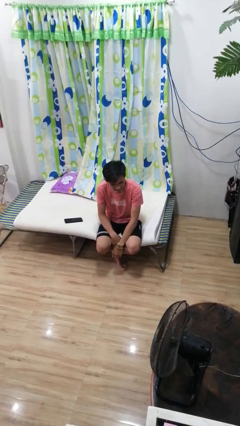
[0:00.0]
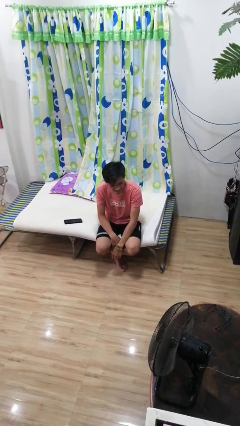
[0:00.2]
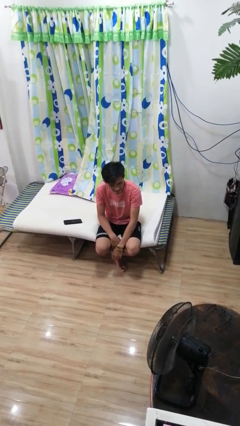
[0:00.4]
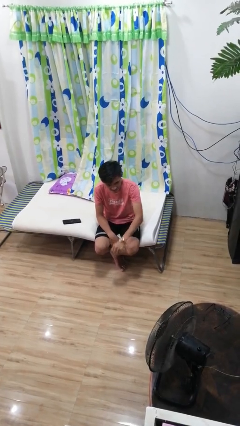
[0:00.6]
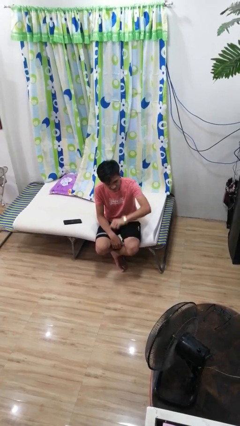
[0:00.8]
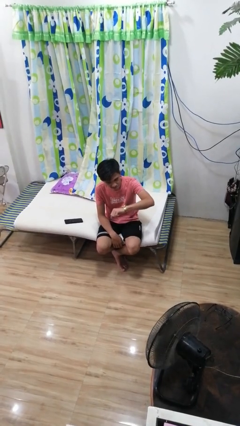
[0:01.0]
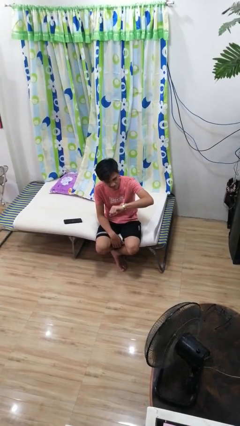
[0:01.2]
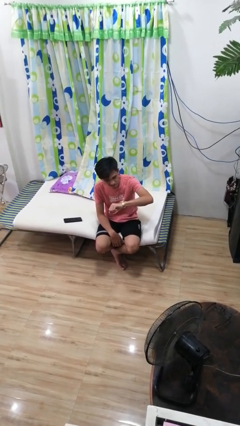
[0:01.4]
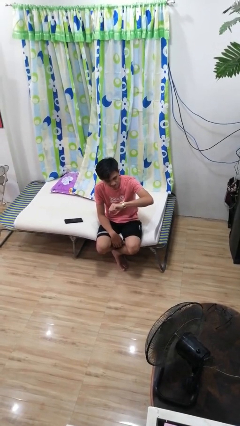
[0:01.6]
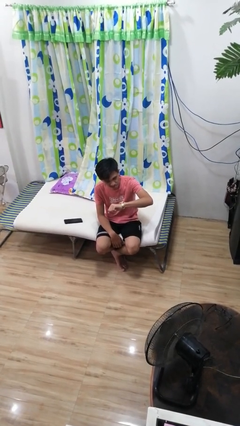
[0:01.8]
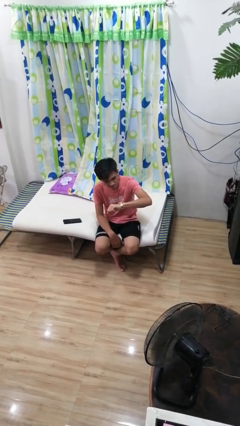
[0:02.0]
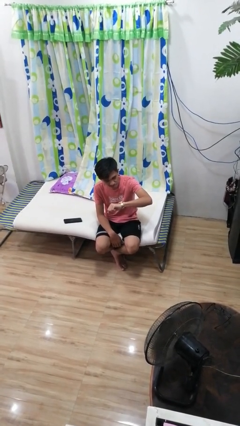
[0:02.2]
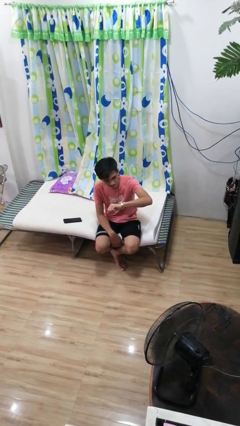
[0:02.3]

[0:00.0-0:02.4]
person looks at wristwatch

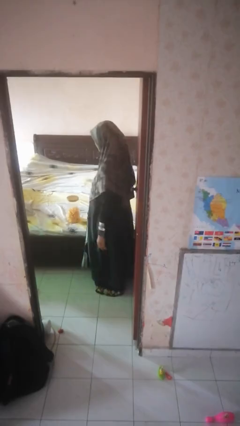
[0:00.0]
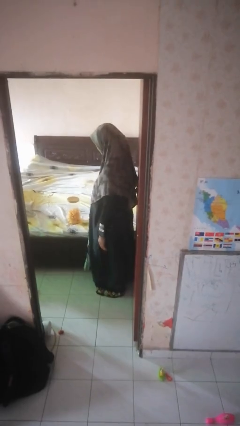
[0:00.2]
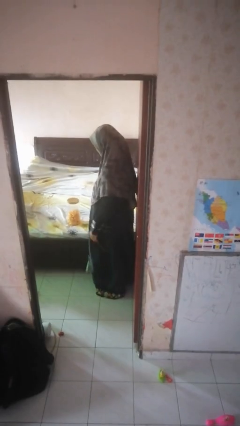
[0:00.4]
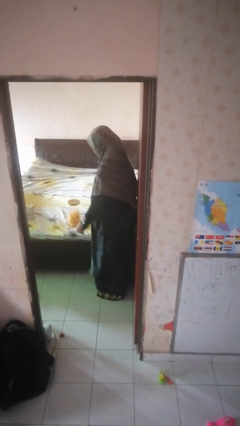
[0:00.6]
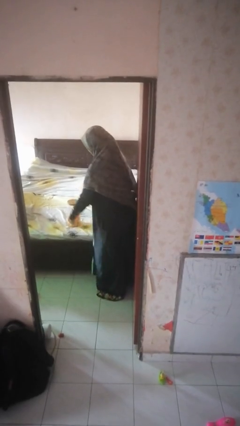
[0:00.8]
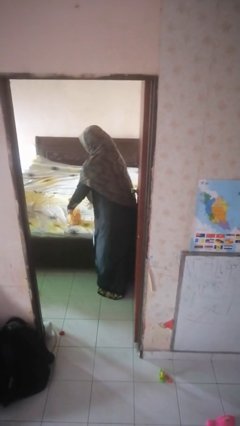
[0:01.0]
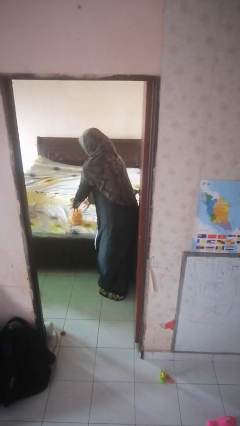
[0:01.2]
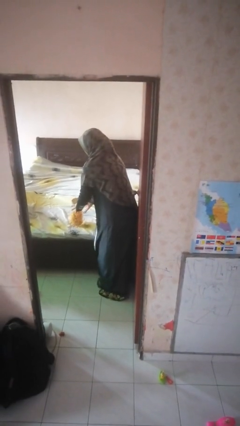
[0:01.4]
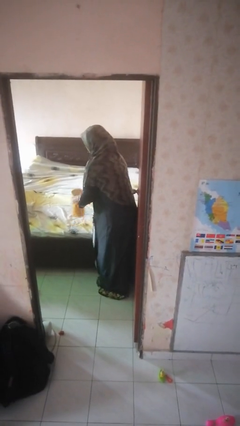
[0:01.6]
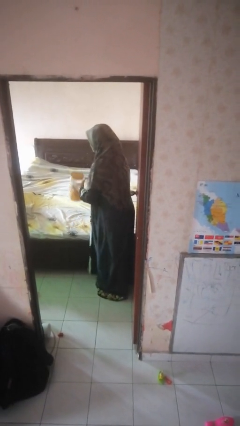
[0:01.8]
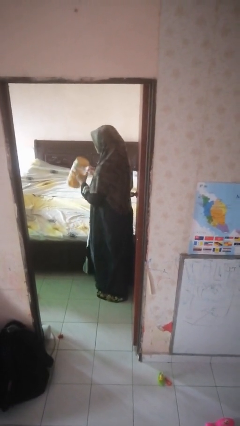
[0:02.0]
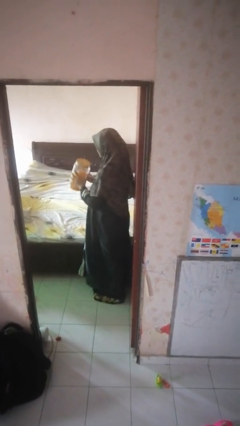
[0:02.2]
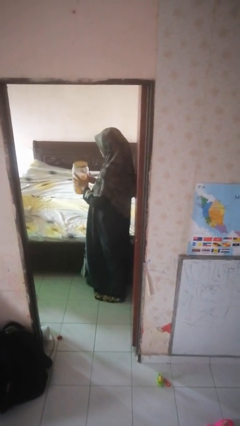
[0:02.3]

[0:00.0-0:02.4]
person picks up object from bed

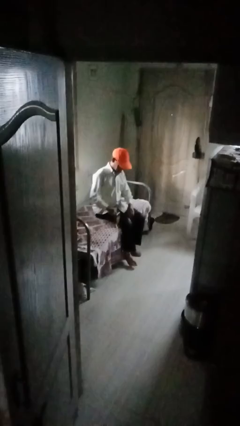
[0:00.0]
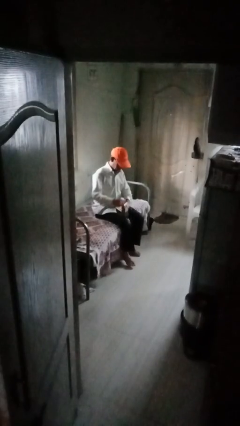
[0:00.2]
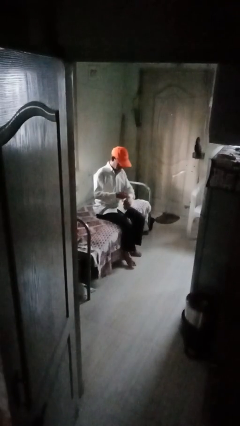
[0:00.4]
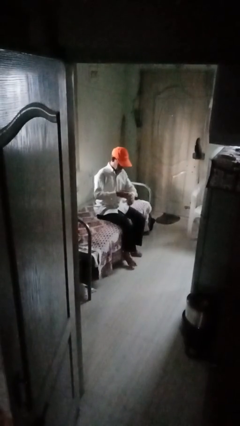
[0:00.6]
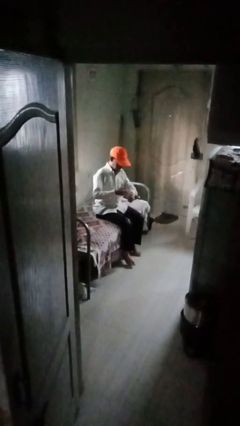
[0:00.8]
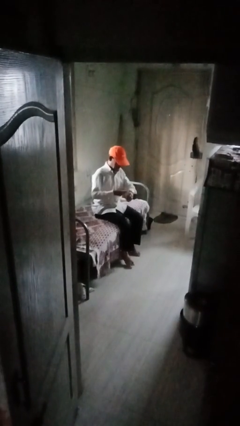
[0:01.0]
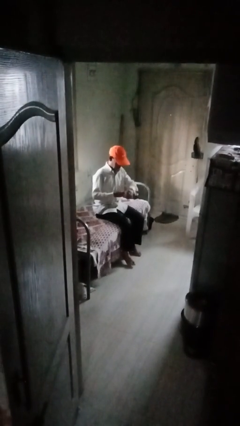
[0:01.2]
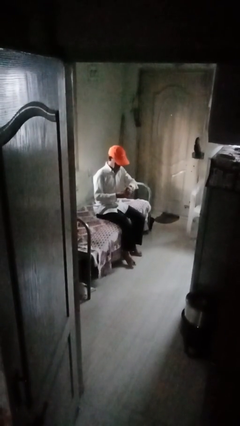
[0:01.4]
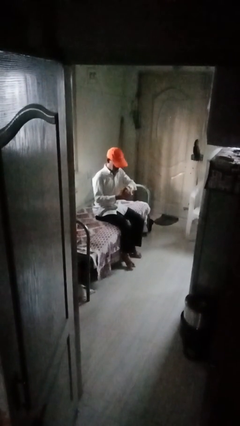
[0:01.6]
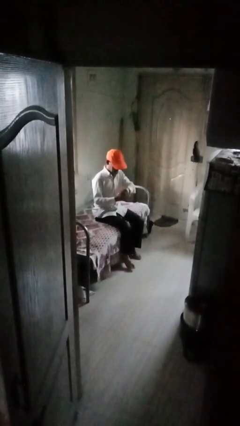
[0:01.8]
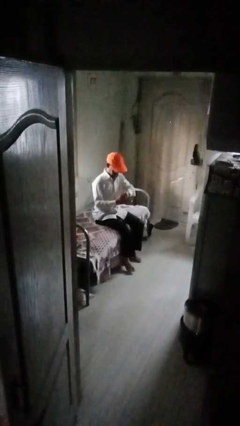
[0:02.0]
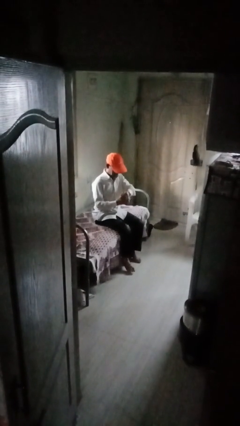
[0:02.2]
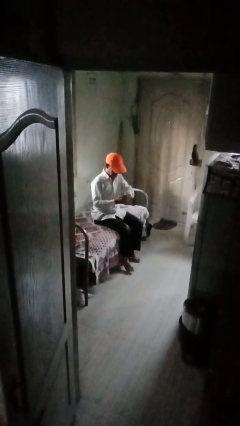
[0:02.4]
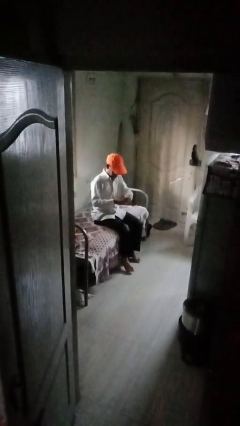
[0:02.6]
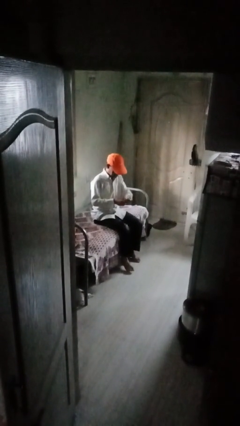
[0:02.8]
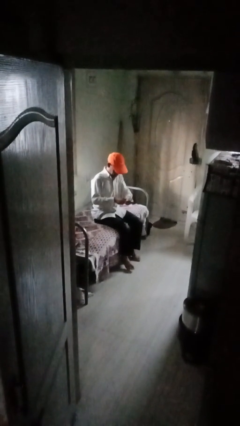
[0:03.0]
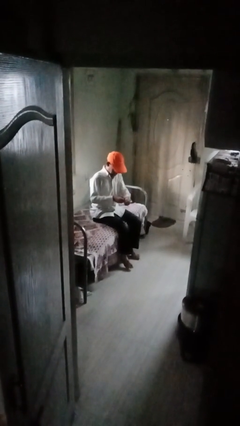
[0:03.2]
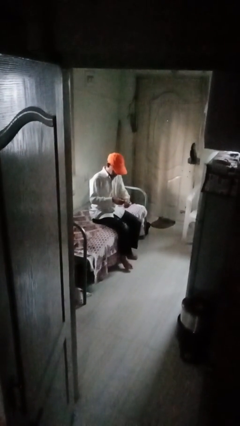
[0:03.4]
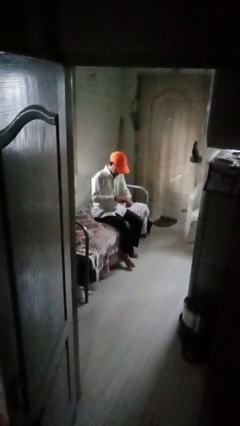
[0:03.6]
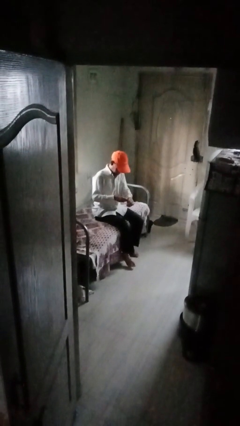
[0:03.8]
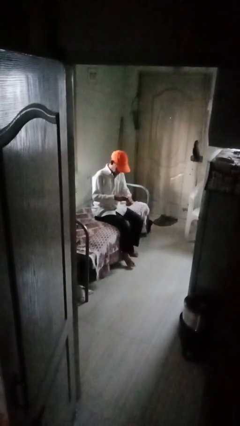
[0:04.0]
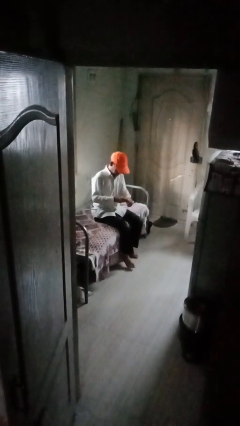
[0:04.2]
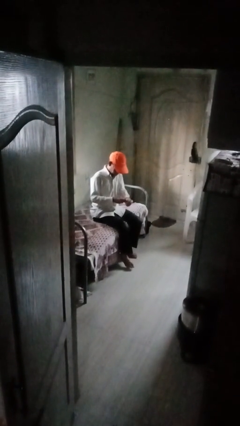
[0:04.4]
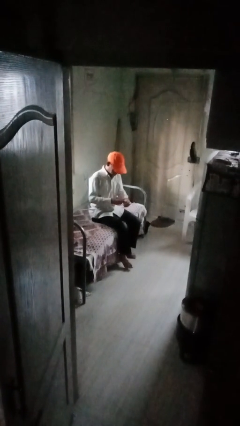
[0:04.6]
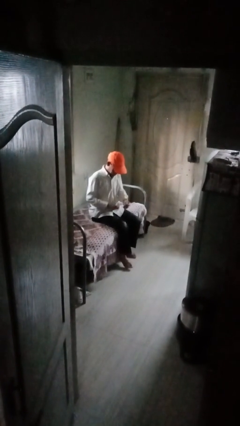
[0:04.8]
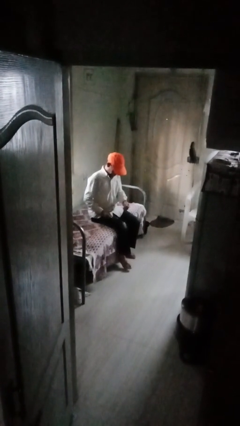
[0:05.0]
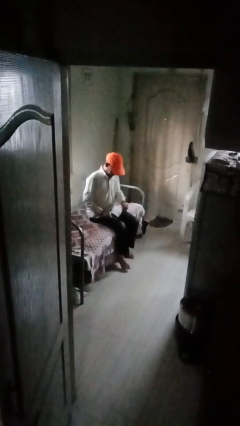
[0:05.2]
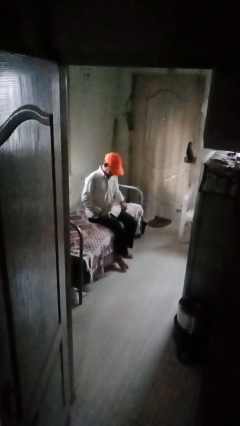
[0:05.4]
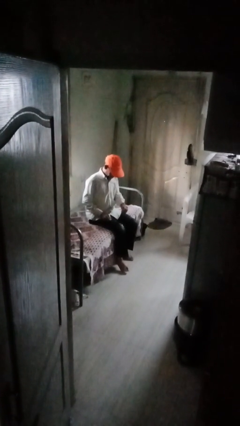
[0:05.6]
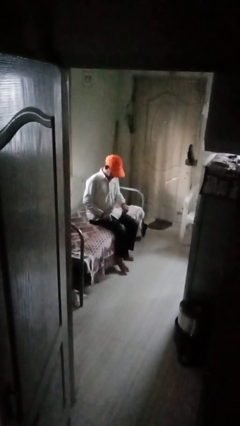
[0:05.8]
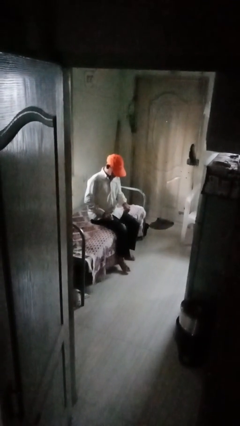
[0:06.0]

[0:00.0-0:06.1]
person puts on wristwatch

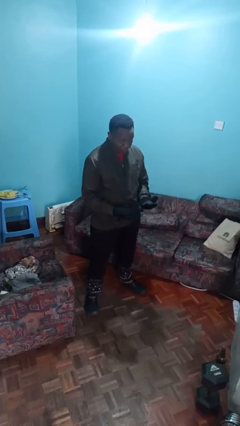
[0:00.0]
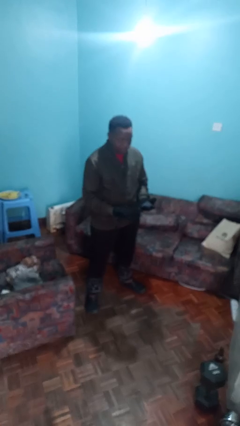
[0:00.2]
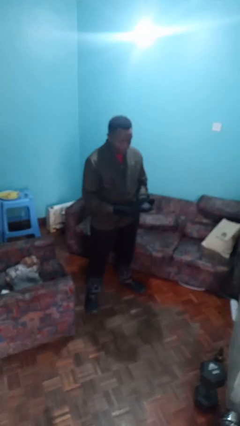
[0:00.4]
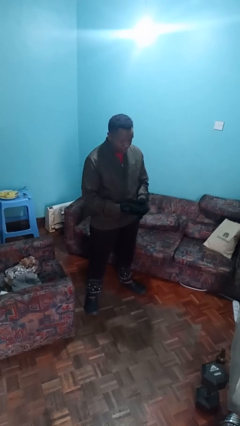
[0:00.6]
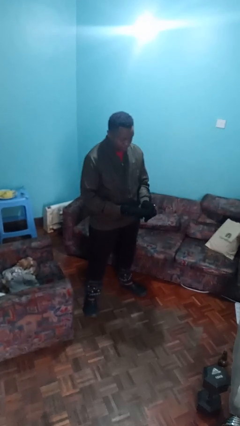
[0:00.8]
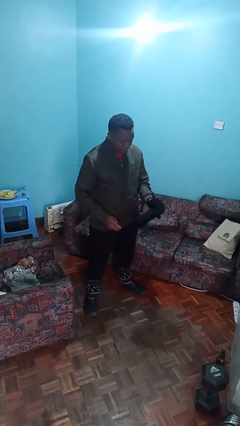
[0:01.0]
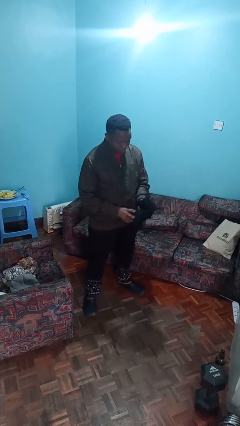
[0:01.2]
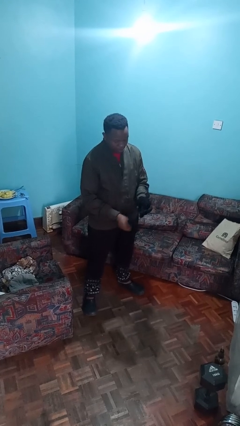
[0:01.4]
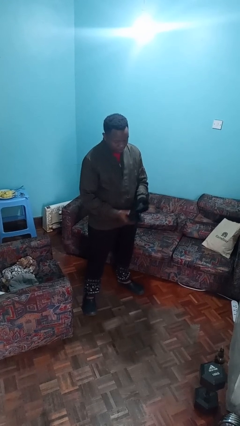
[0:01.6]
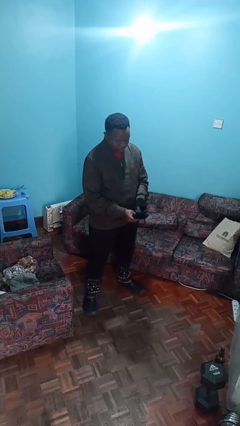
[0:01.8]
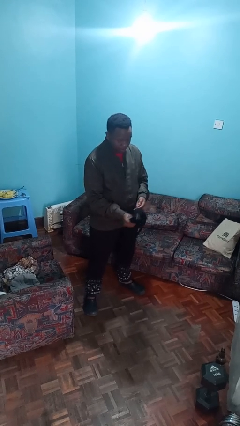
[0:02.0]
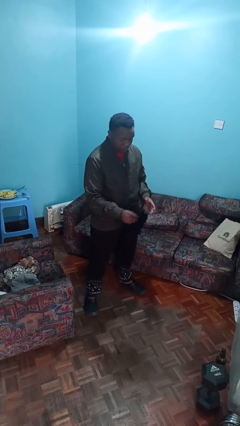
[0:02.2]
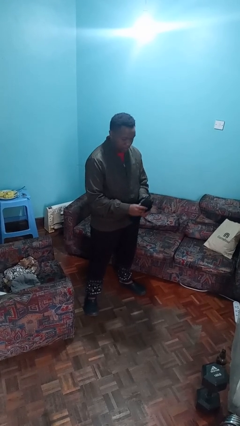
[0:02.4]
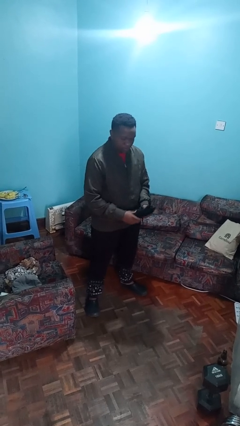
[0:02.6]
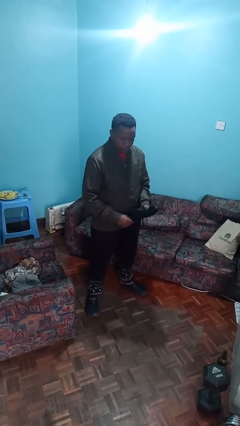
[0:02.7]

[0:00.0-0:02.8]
person takes off gloves

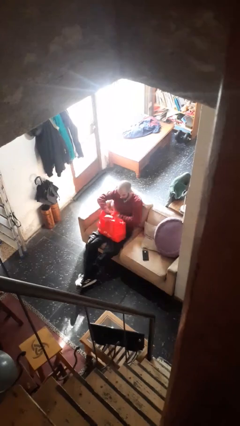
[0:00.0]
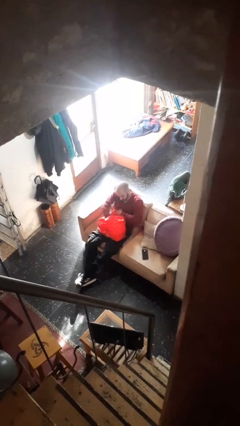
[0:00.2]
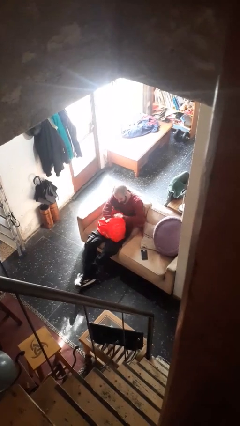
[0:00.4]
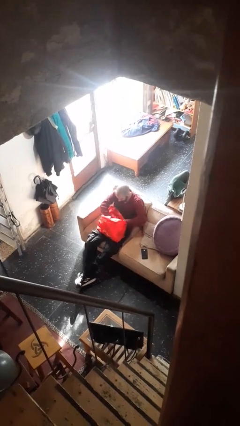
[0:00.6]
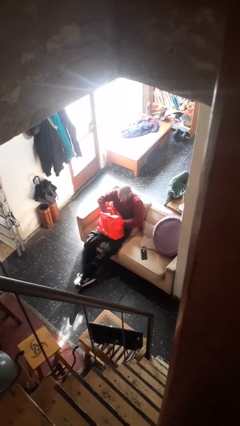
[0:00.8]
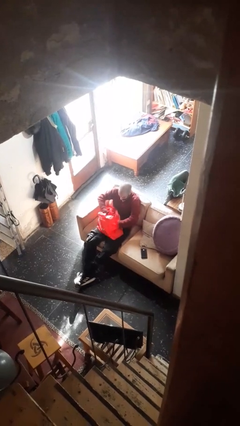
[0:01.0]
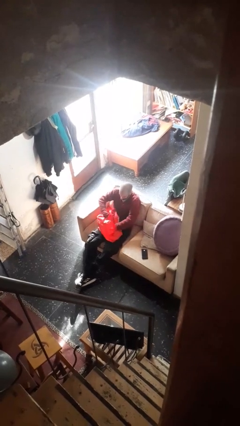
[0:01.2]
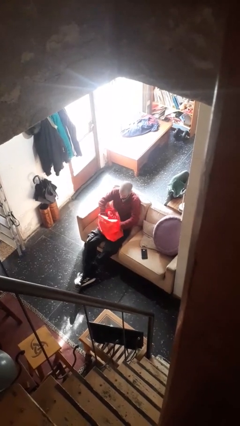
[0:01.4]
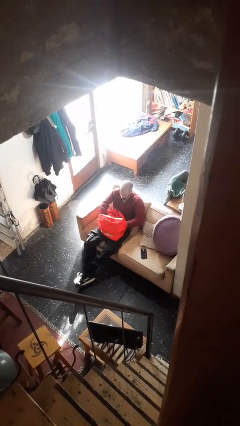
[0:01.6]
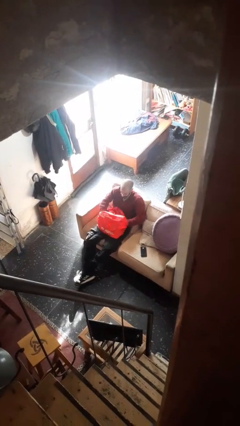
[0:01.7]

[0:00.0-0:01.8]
person searches in bag

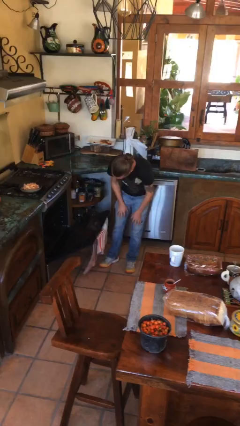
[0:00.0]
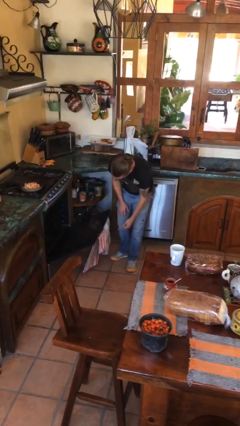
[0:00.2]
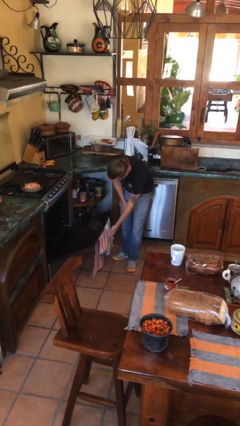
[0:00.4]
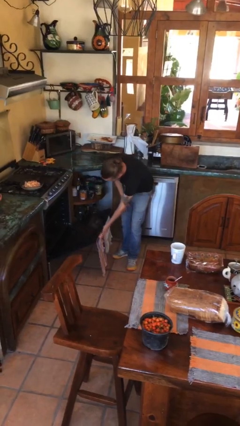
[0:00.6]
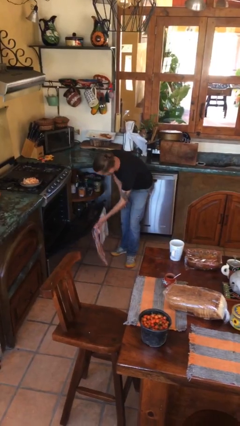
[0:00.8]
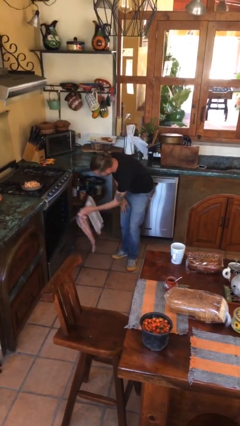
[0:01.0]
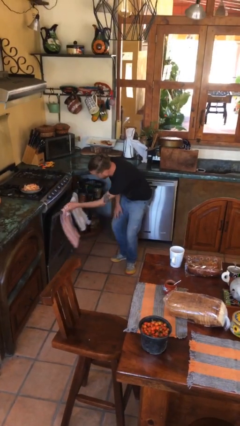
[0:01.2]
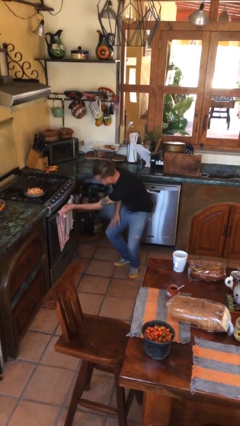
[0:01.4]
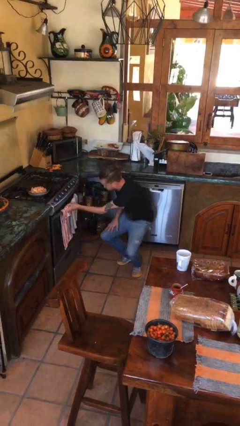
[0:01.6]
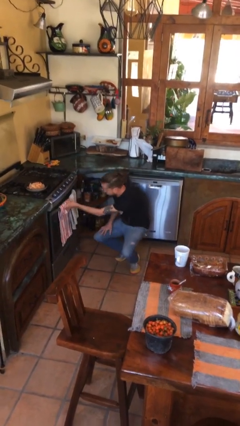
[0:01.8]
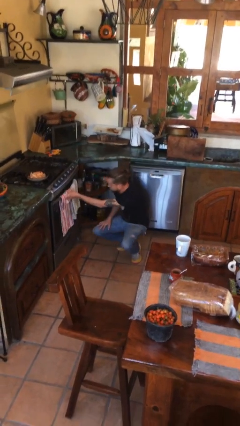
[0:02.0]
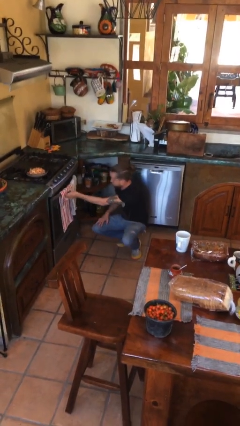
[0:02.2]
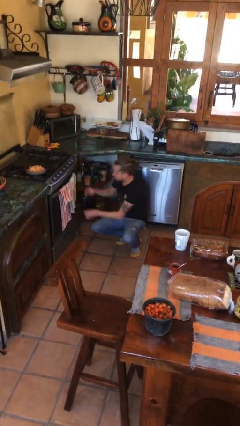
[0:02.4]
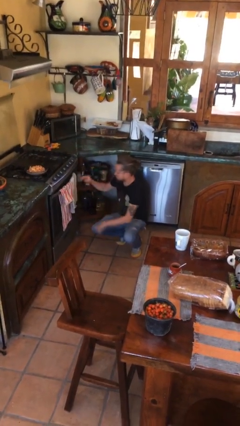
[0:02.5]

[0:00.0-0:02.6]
person closes oven door
